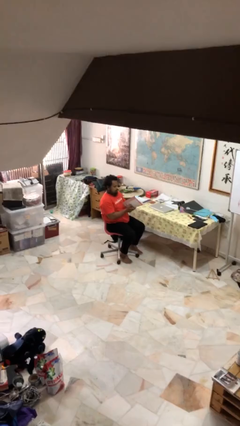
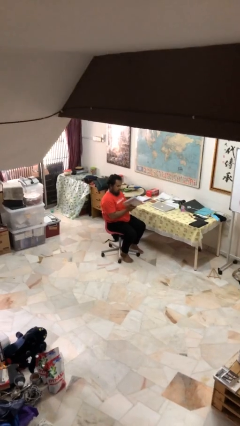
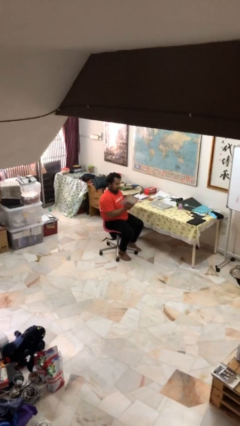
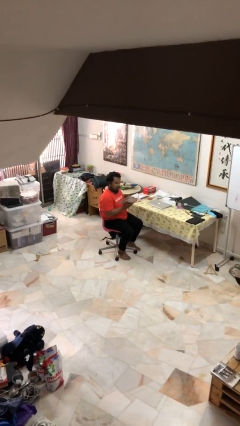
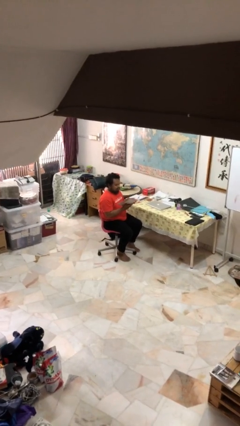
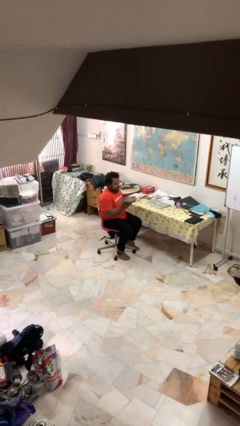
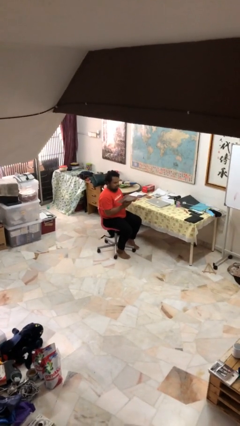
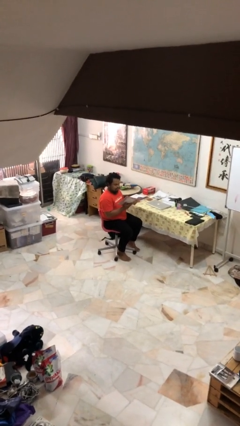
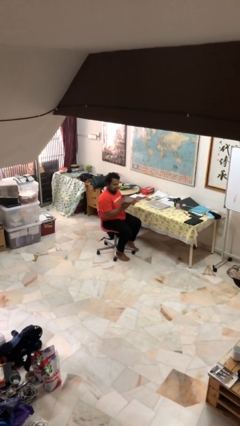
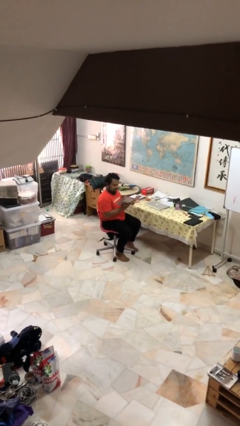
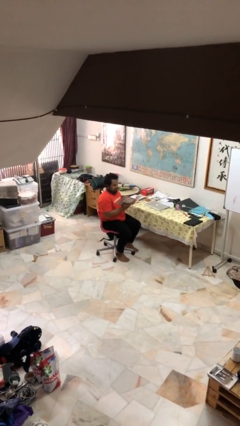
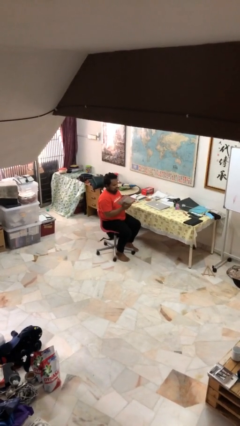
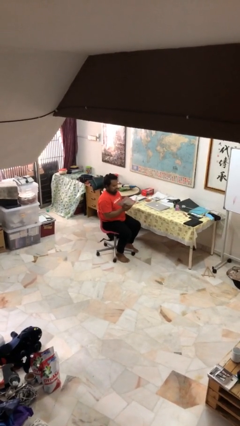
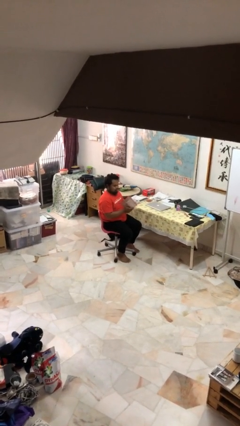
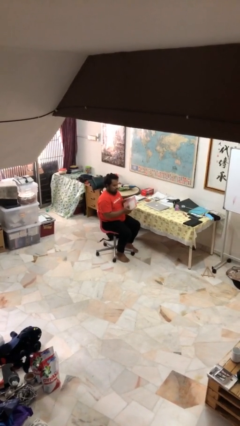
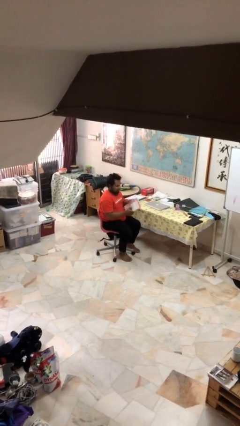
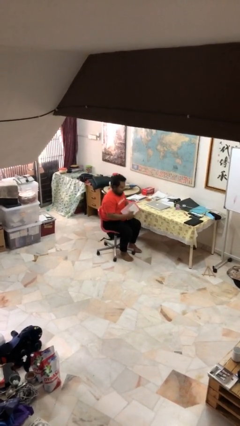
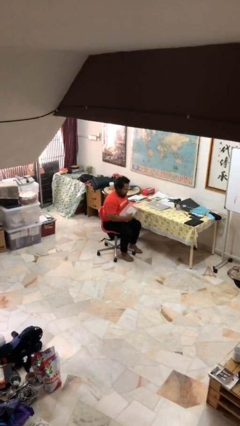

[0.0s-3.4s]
person reads document

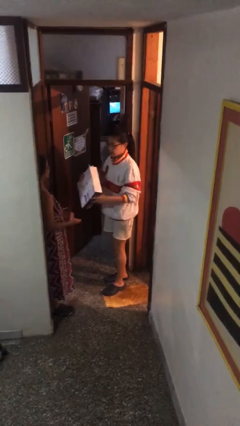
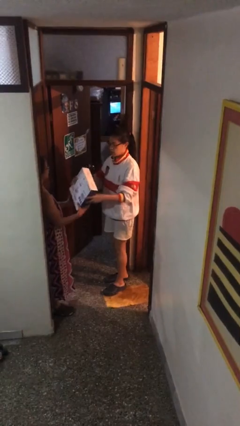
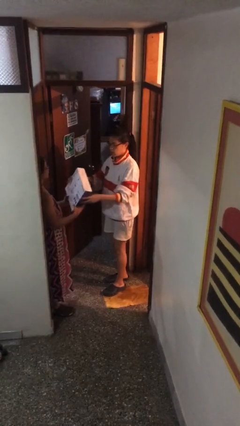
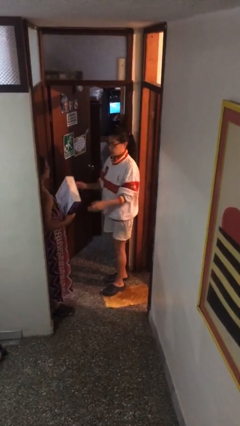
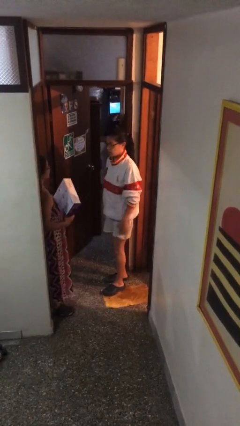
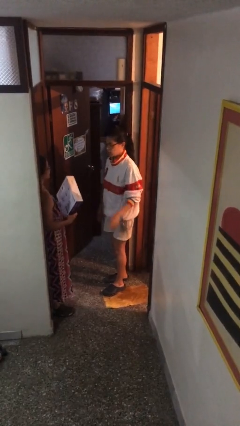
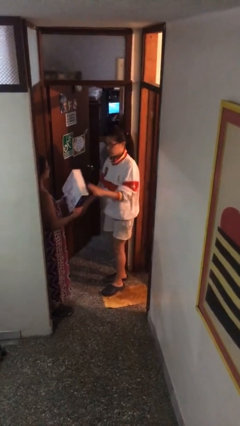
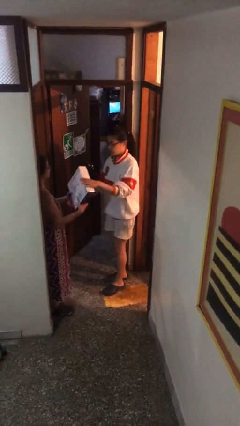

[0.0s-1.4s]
person transfers object to person

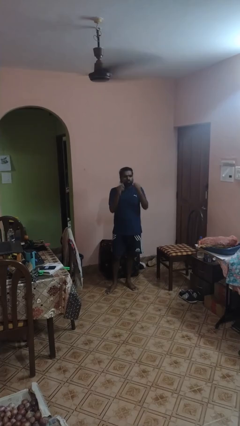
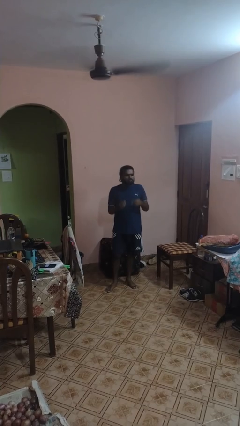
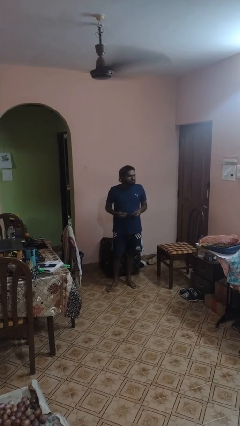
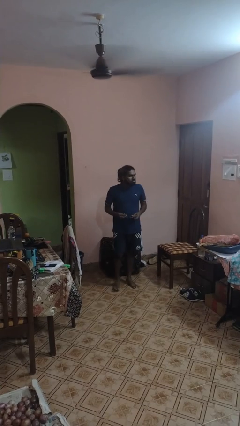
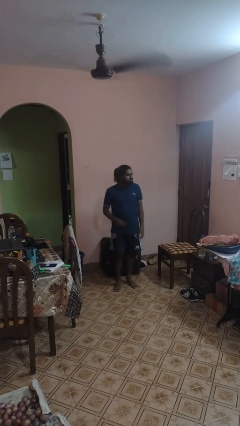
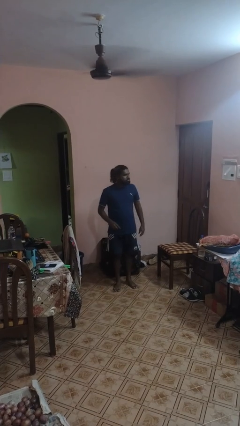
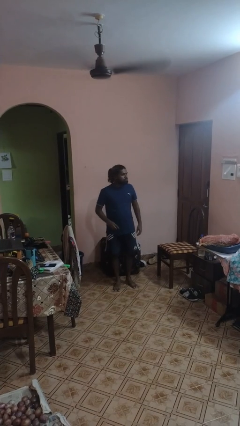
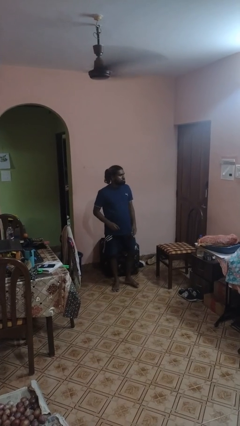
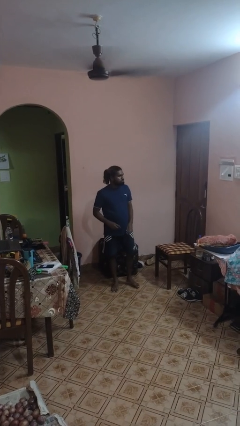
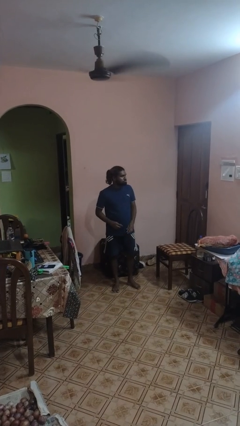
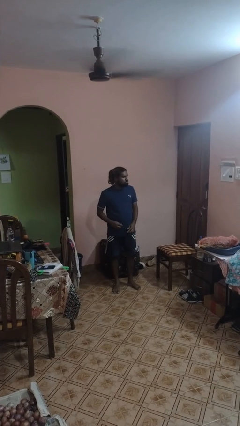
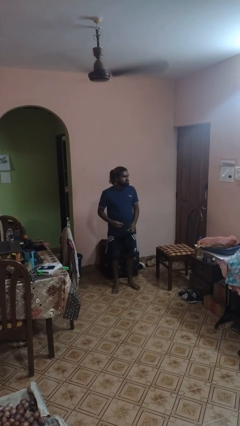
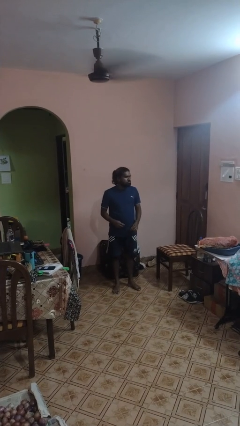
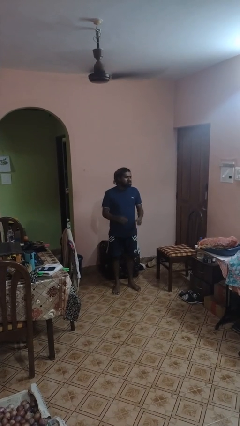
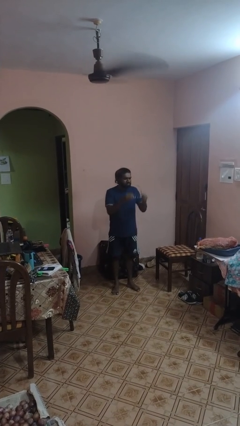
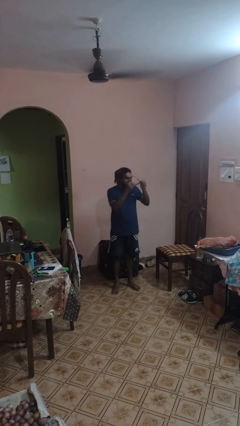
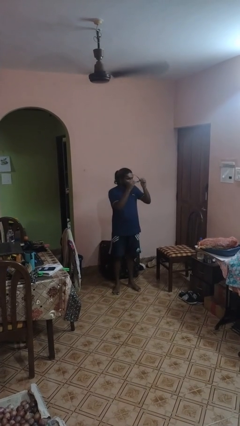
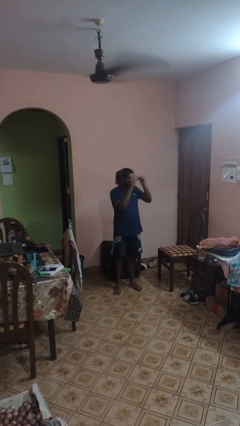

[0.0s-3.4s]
person takes off glasses

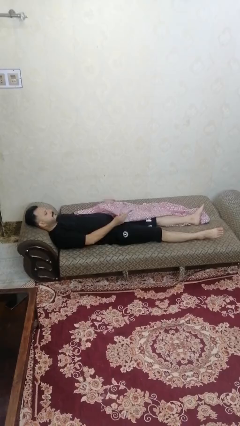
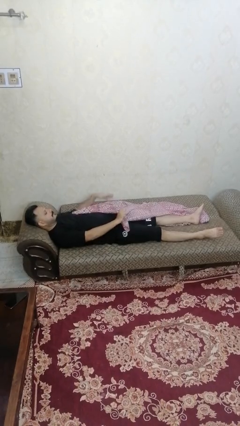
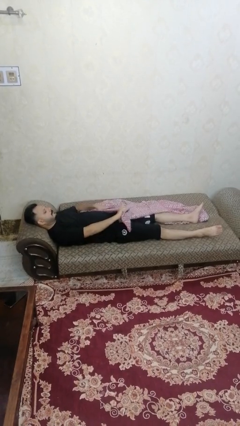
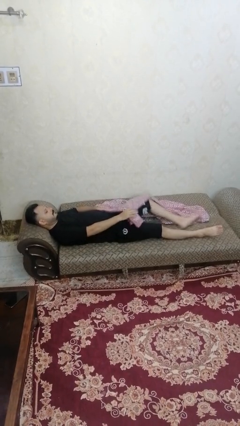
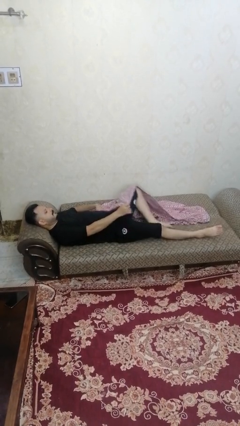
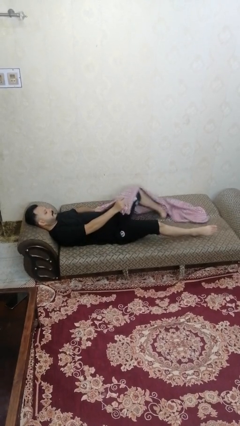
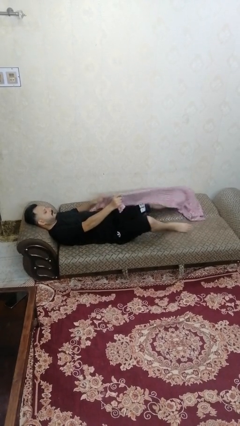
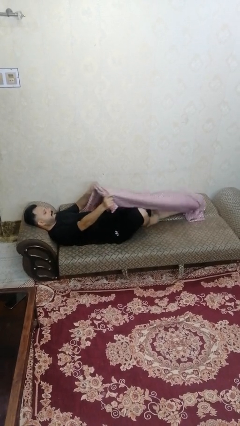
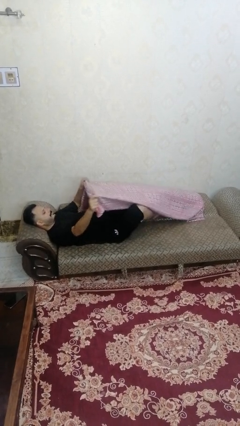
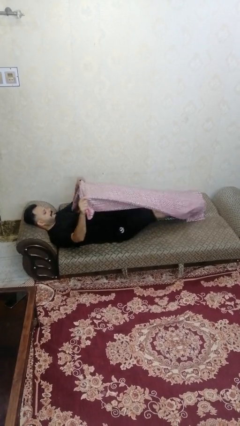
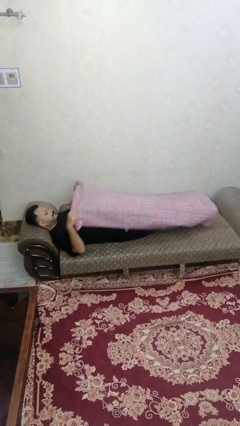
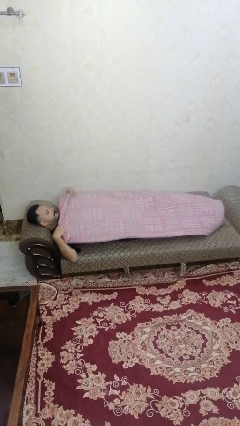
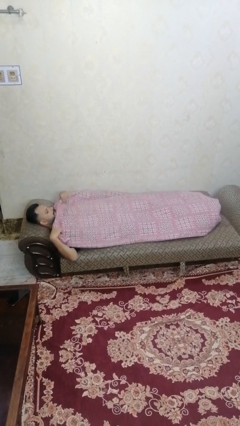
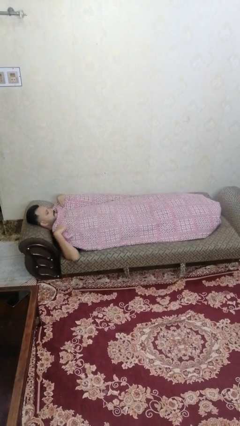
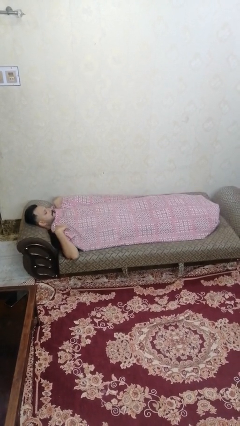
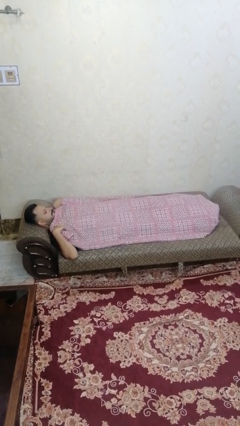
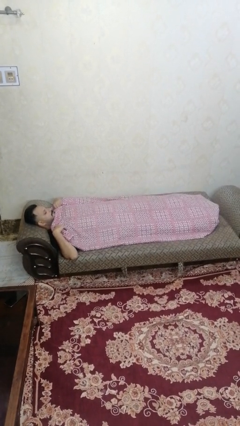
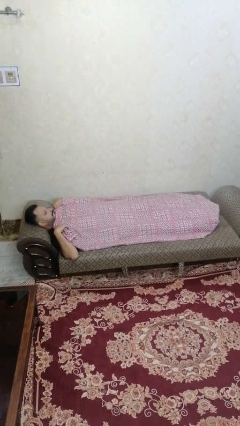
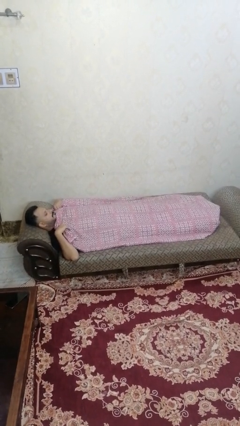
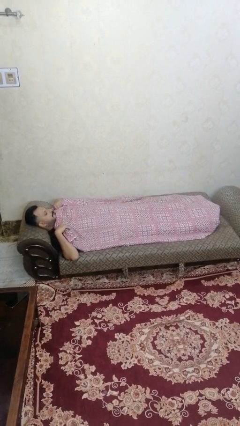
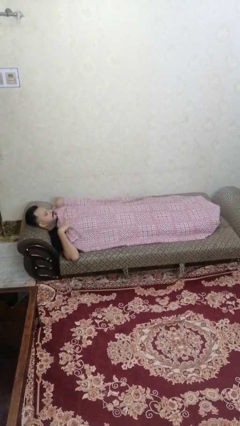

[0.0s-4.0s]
person covers with bedsheets

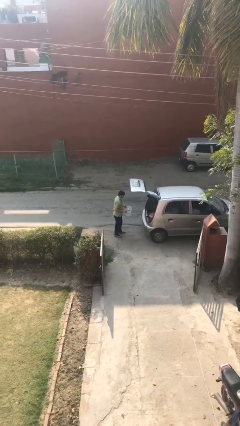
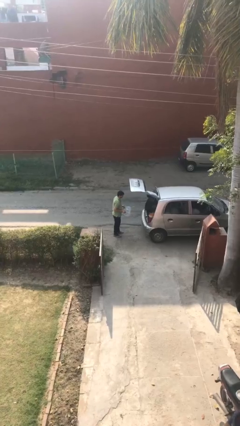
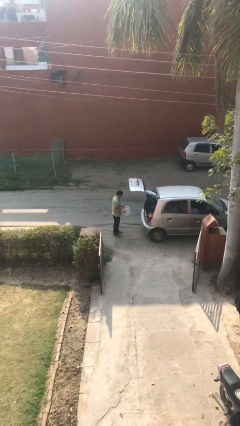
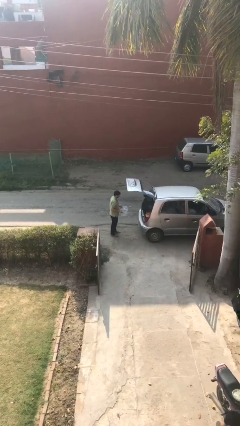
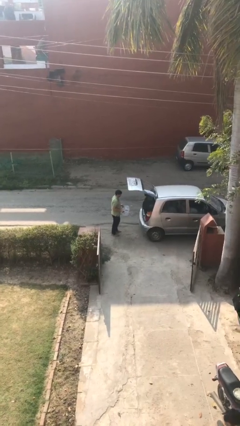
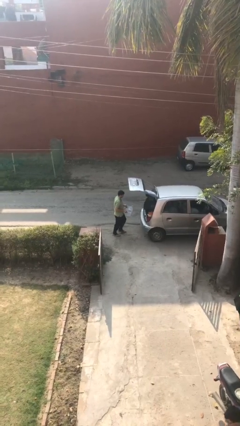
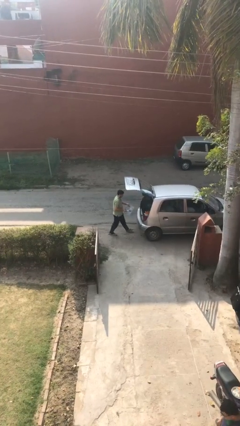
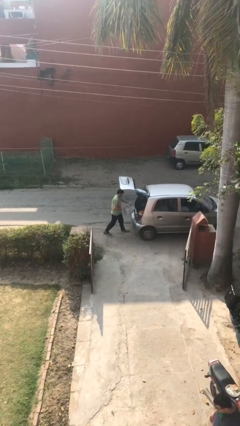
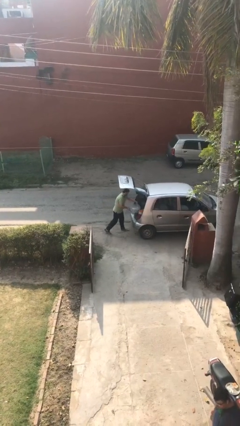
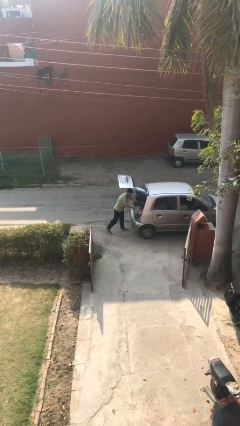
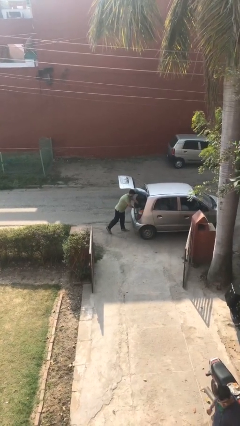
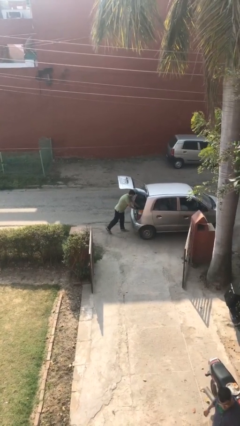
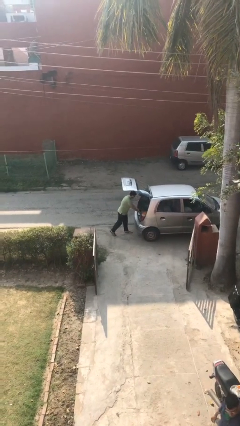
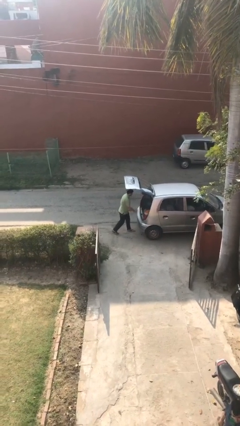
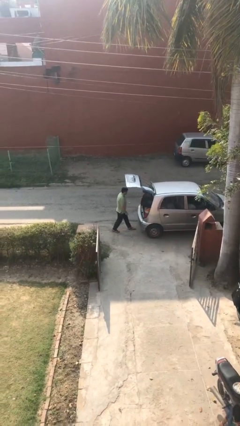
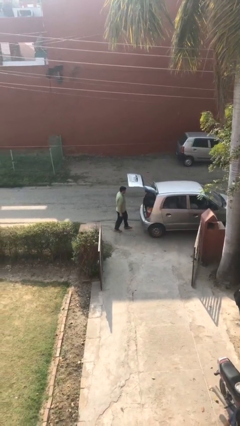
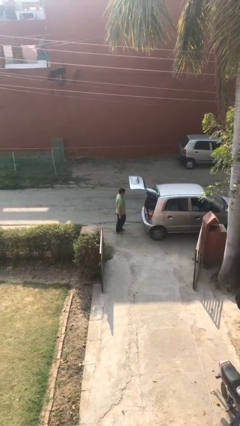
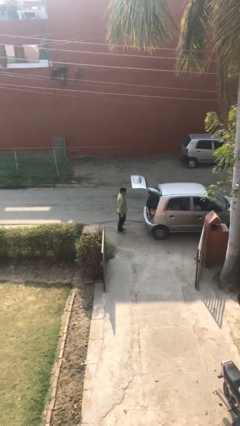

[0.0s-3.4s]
person loads car

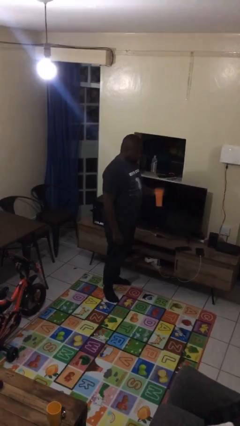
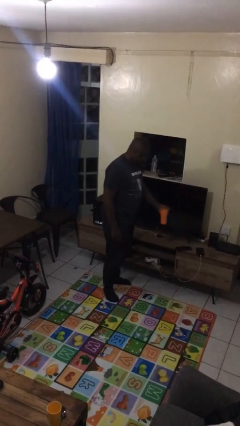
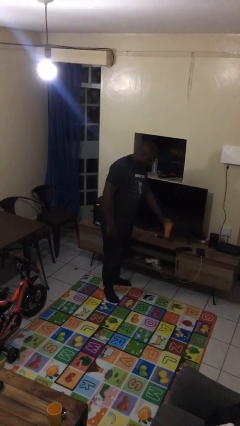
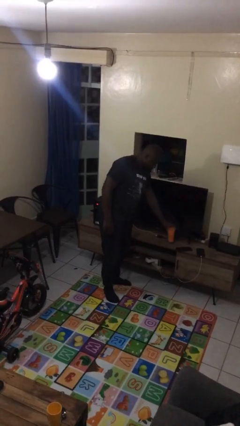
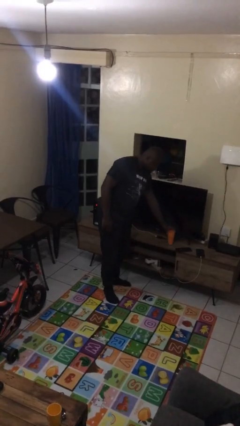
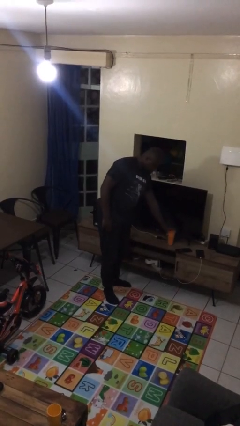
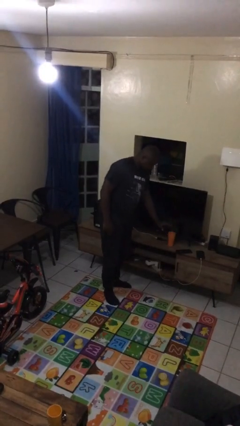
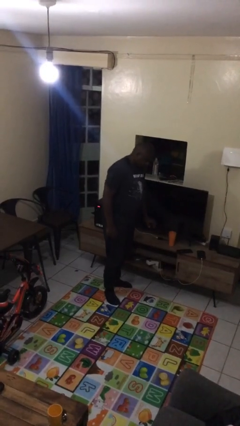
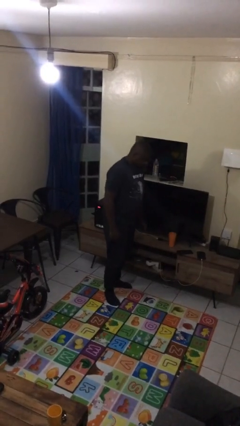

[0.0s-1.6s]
person puts down object on countertop

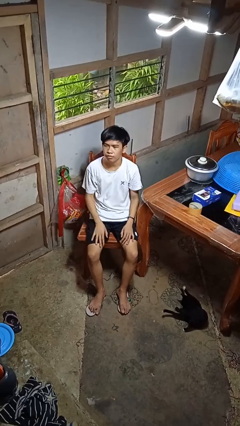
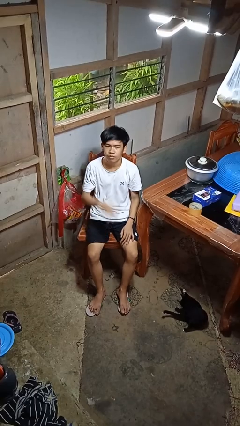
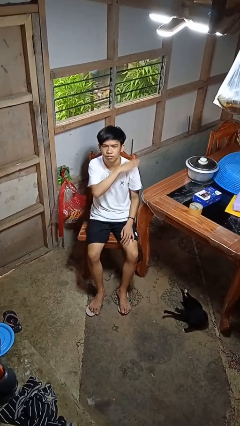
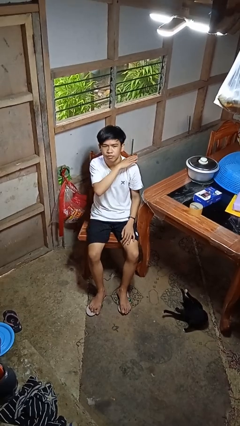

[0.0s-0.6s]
person gestures cut
